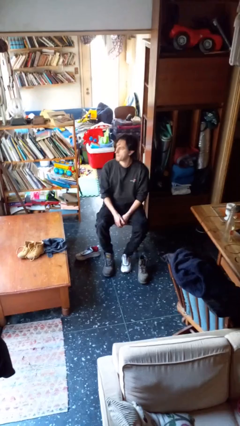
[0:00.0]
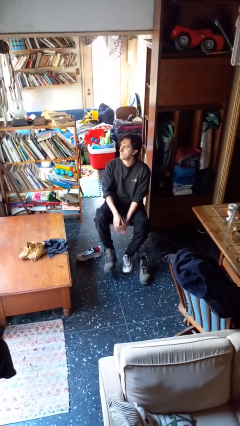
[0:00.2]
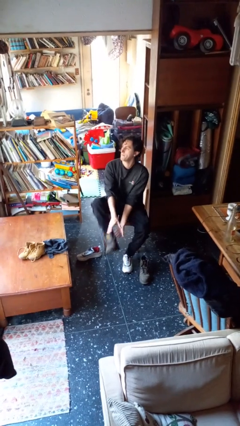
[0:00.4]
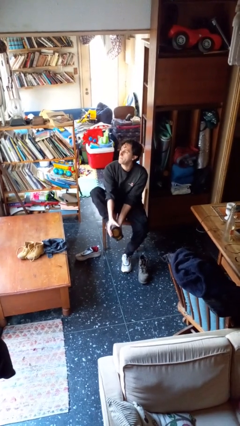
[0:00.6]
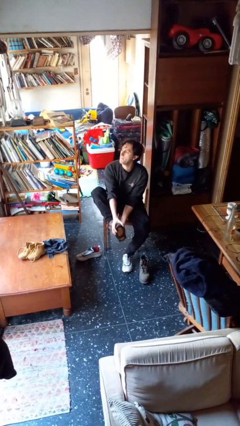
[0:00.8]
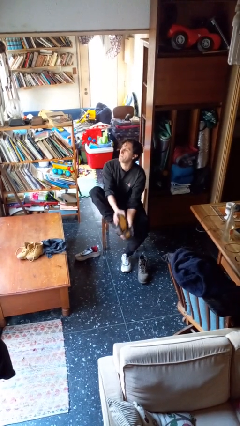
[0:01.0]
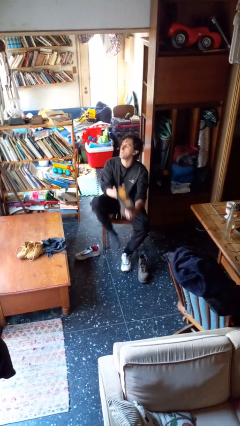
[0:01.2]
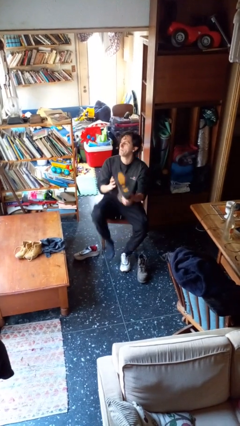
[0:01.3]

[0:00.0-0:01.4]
person takes off boots

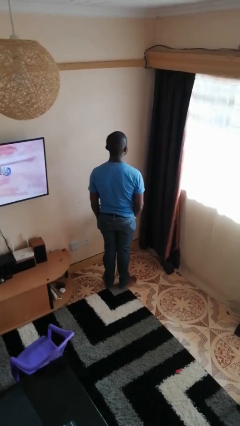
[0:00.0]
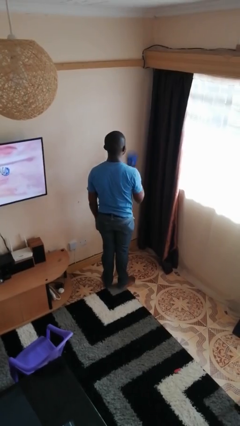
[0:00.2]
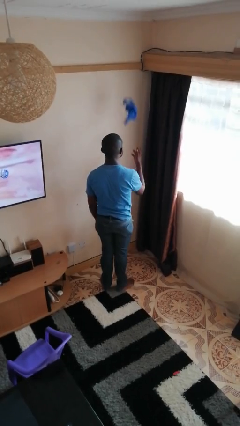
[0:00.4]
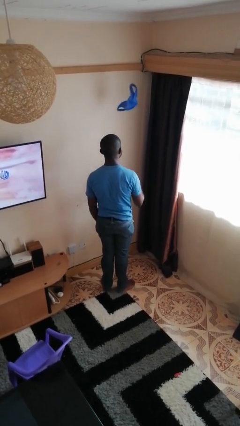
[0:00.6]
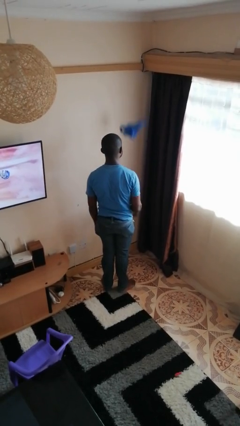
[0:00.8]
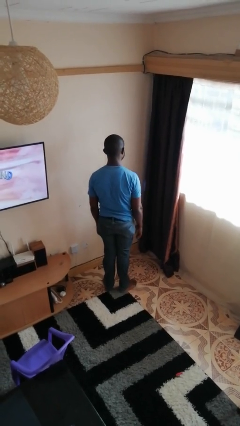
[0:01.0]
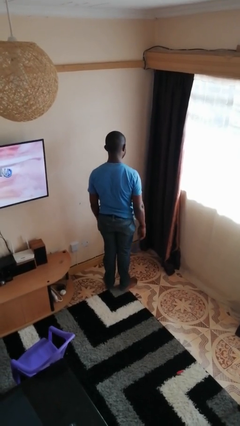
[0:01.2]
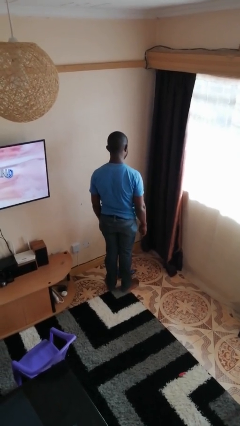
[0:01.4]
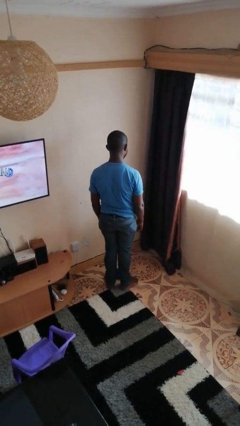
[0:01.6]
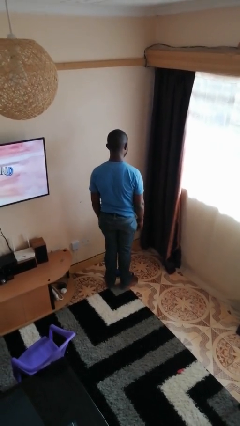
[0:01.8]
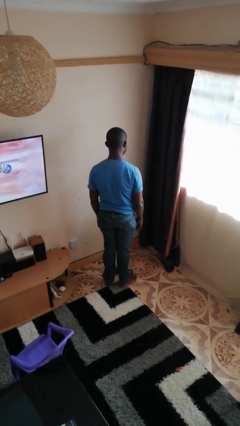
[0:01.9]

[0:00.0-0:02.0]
person throws object into air

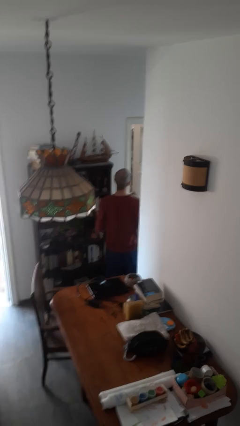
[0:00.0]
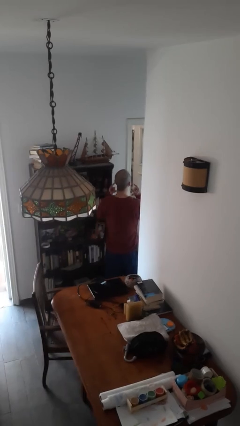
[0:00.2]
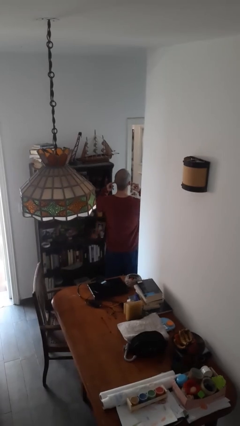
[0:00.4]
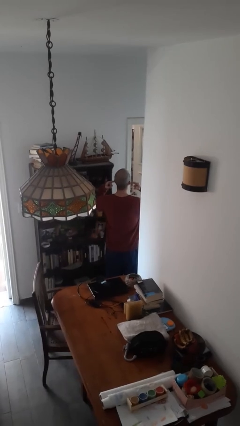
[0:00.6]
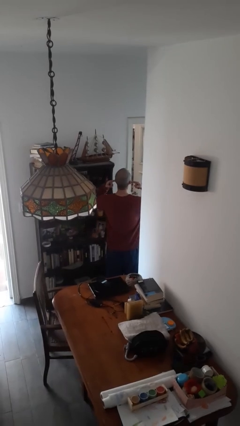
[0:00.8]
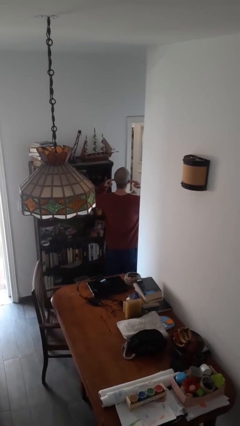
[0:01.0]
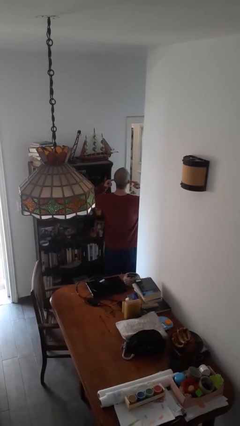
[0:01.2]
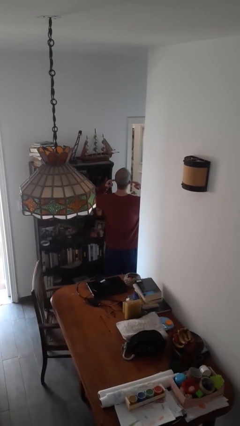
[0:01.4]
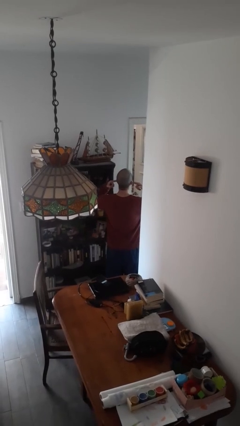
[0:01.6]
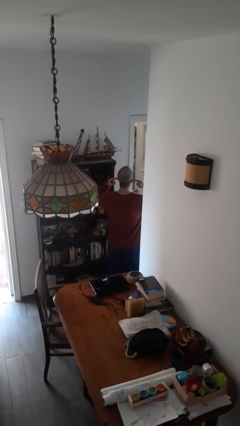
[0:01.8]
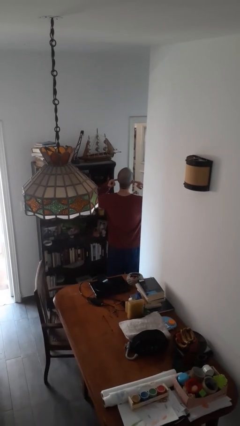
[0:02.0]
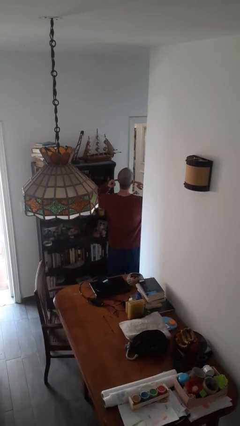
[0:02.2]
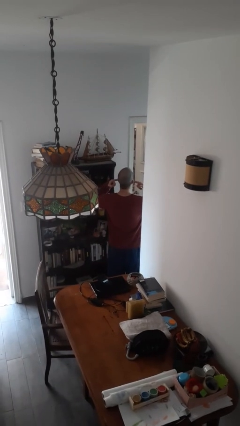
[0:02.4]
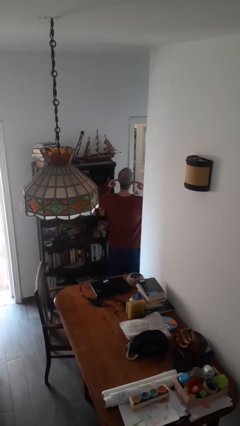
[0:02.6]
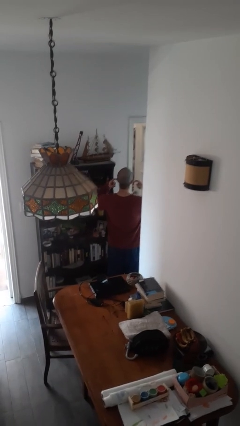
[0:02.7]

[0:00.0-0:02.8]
person puts fingers in ear

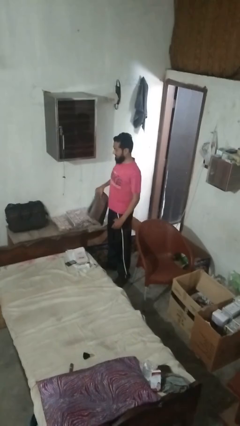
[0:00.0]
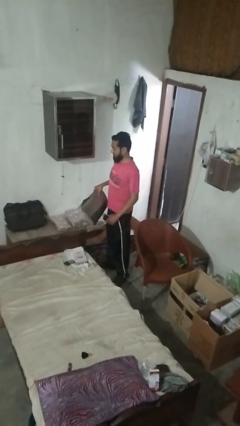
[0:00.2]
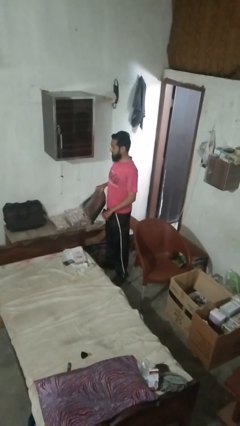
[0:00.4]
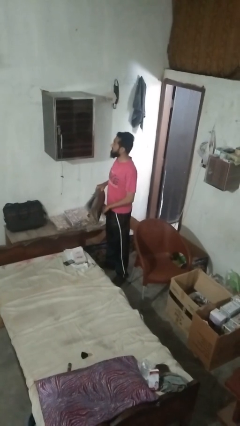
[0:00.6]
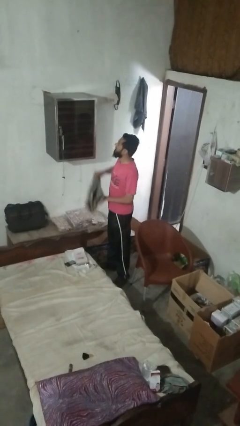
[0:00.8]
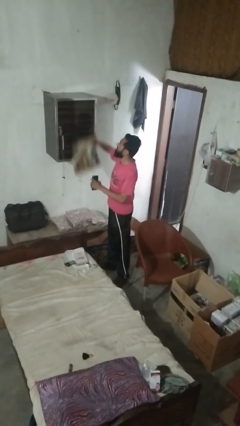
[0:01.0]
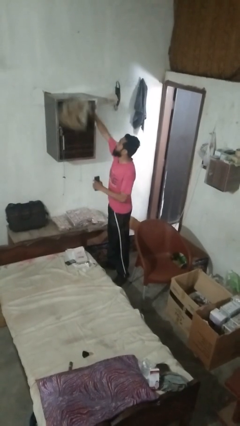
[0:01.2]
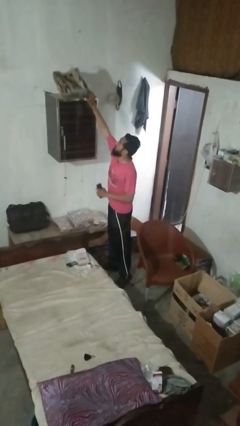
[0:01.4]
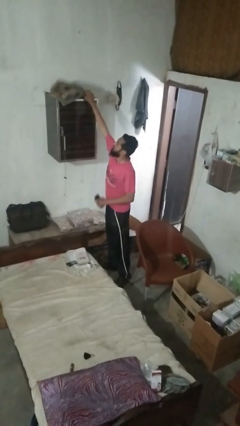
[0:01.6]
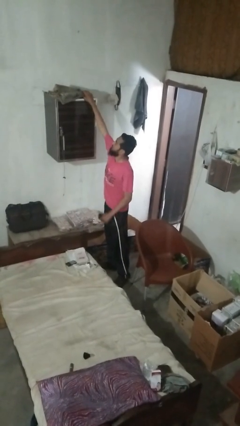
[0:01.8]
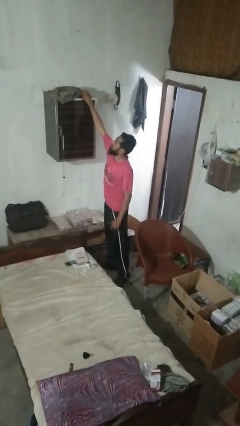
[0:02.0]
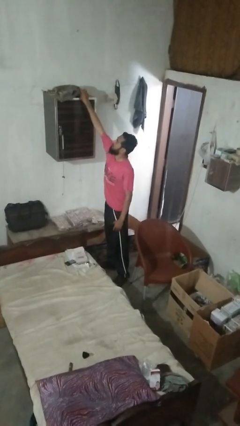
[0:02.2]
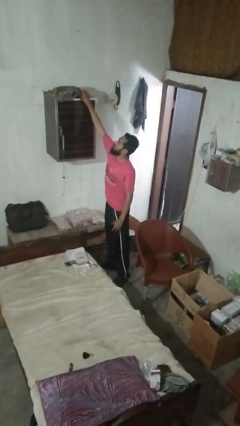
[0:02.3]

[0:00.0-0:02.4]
person puts down object on shelf

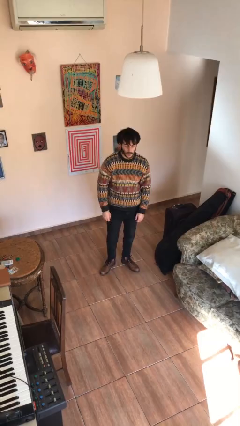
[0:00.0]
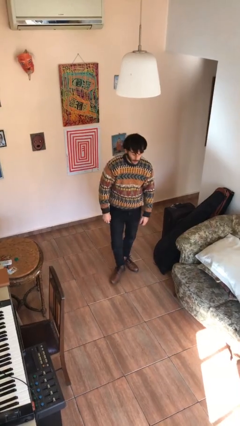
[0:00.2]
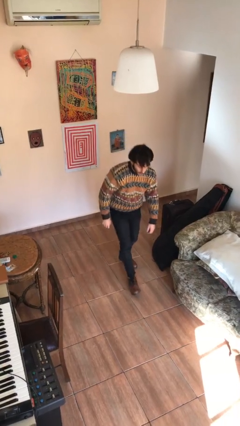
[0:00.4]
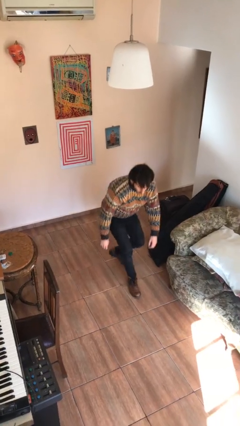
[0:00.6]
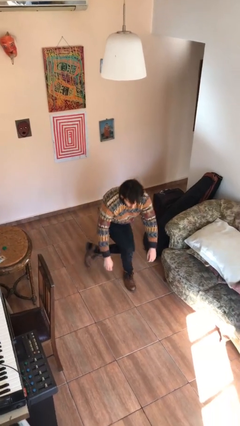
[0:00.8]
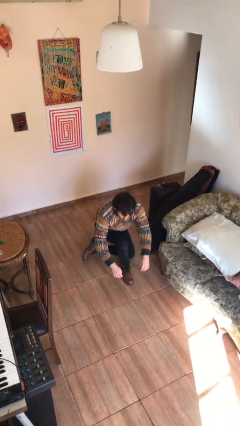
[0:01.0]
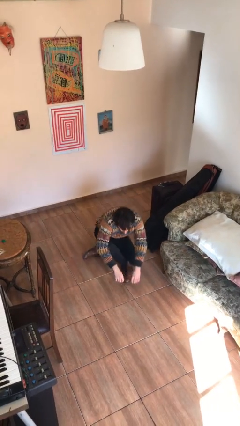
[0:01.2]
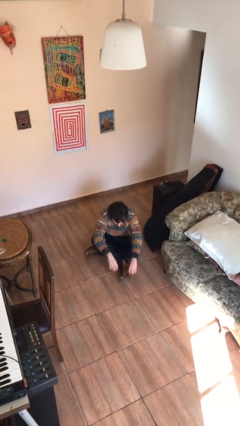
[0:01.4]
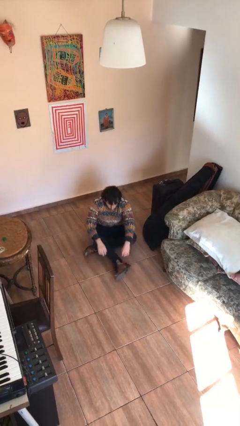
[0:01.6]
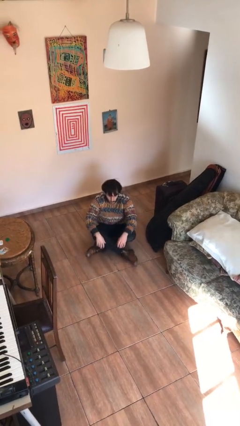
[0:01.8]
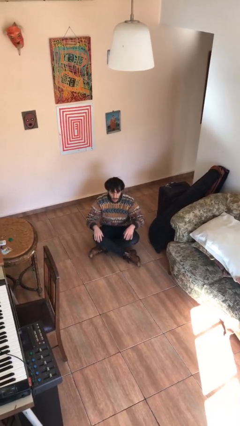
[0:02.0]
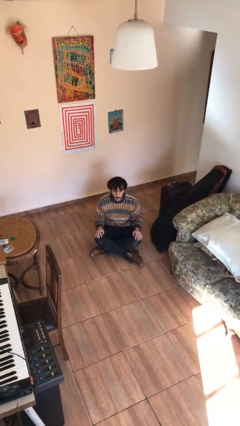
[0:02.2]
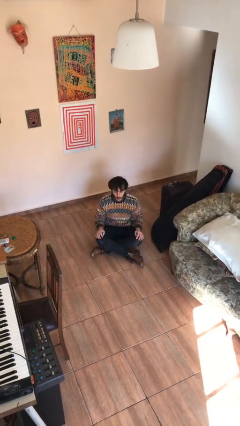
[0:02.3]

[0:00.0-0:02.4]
person sits crisscross

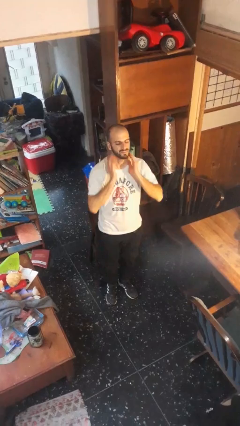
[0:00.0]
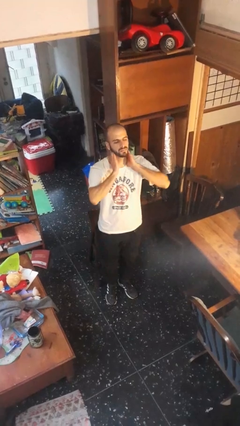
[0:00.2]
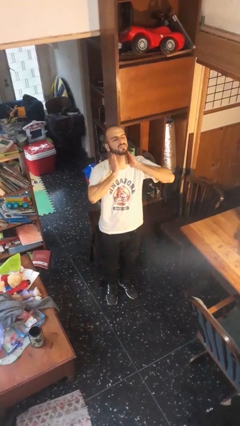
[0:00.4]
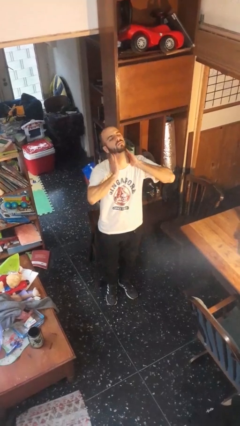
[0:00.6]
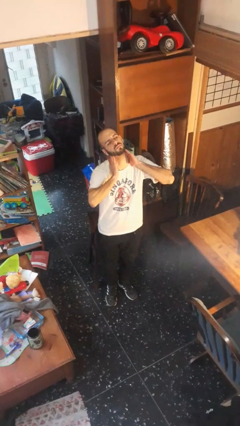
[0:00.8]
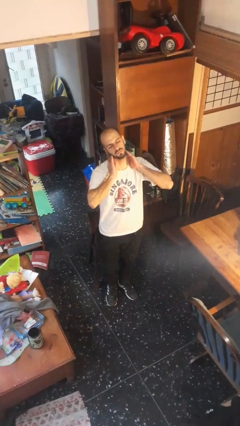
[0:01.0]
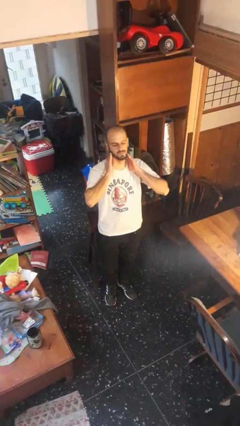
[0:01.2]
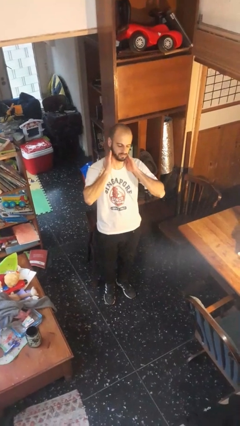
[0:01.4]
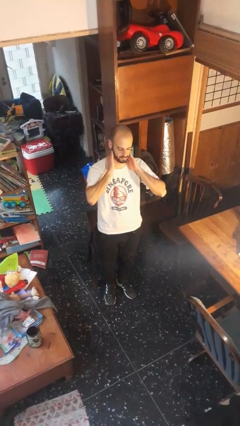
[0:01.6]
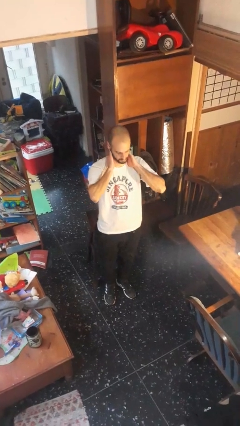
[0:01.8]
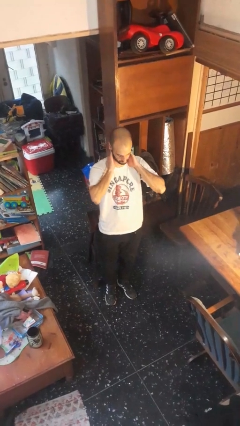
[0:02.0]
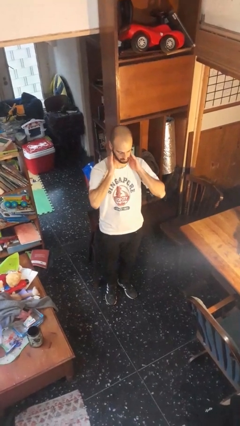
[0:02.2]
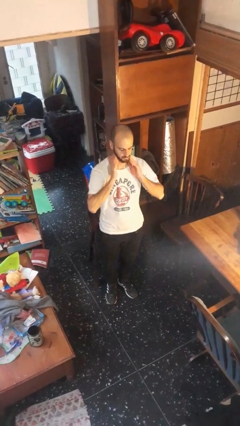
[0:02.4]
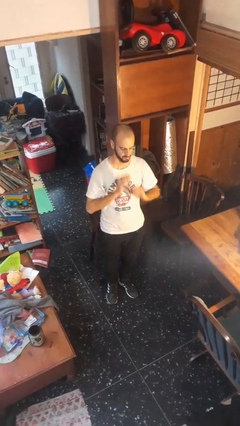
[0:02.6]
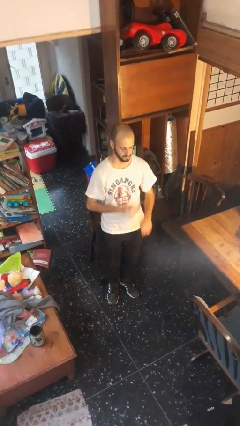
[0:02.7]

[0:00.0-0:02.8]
person rubs neck

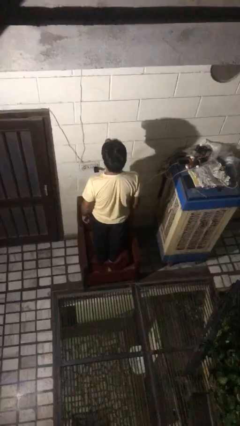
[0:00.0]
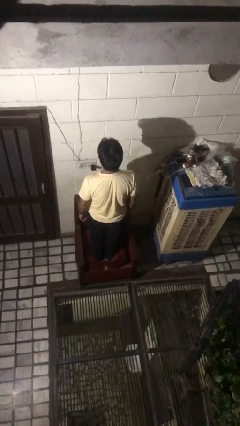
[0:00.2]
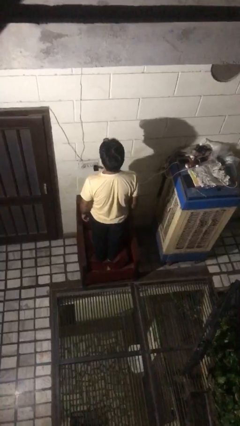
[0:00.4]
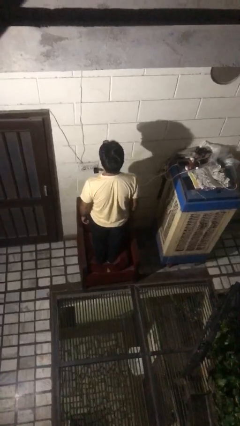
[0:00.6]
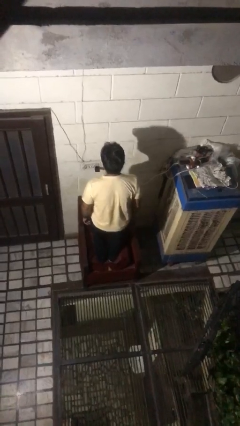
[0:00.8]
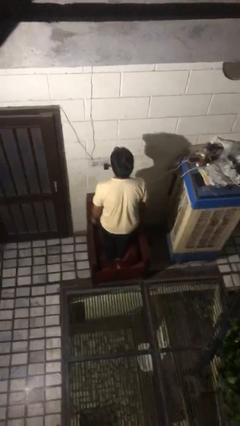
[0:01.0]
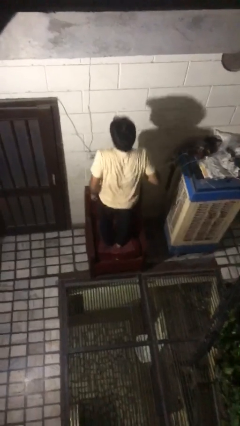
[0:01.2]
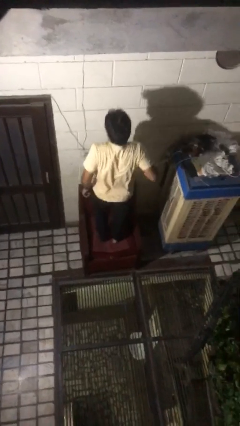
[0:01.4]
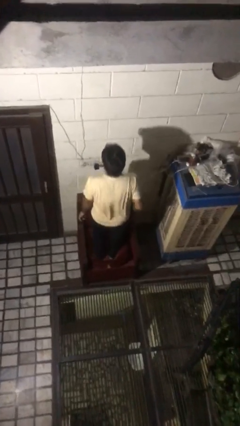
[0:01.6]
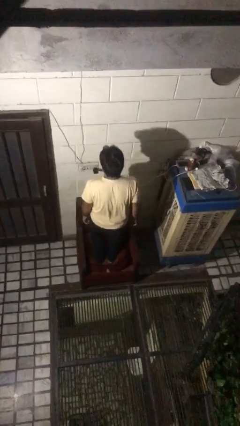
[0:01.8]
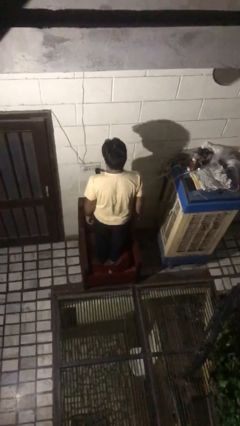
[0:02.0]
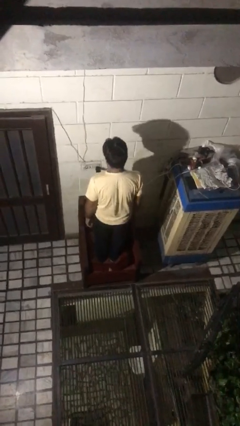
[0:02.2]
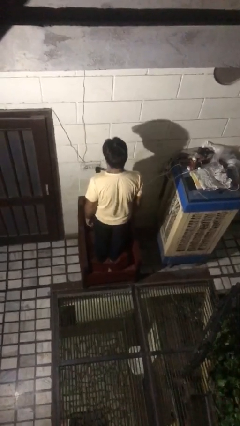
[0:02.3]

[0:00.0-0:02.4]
person jumps on couch

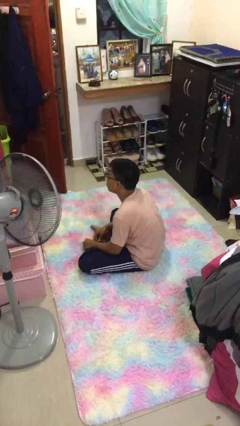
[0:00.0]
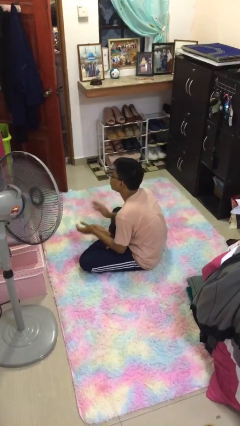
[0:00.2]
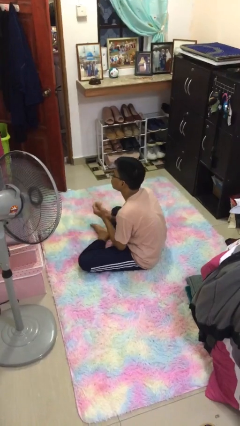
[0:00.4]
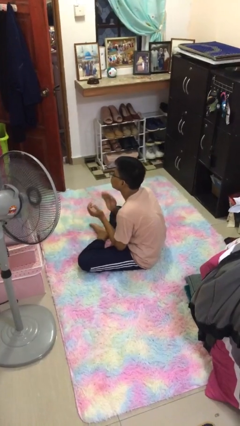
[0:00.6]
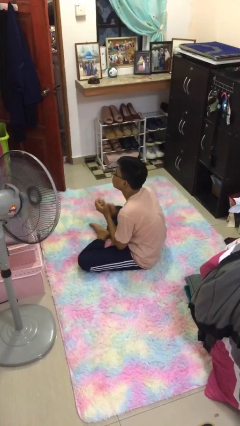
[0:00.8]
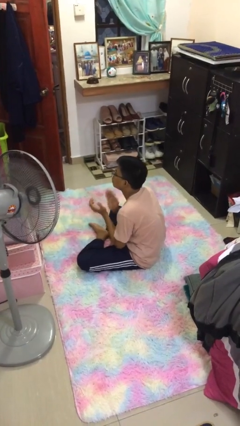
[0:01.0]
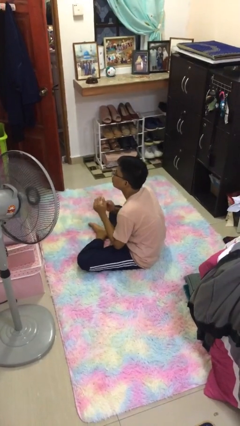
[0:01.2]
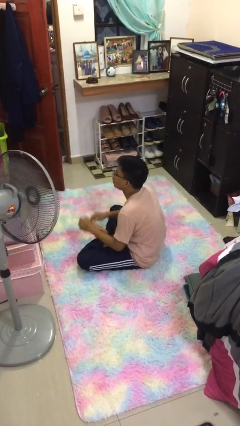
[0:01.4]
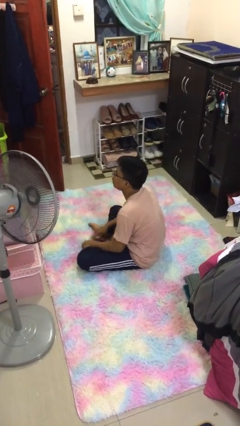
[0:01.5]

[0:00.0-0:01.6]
person claps hands
